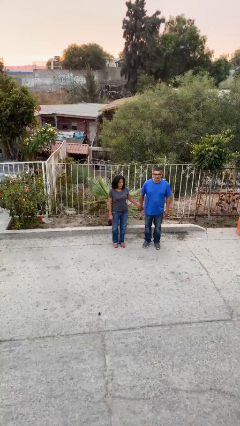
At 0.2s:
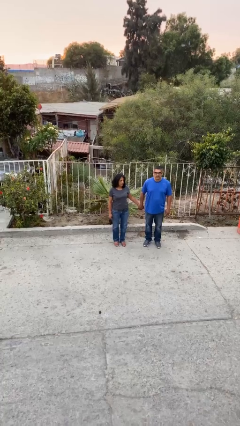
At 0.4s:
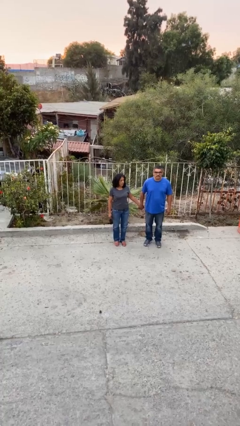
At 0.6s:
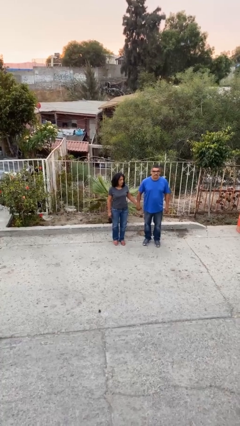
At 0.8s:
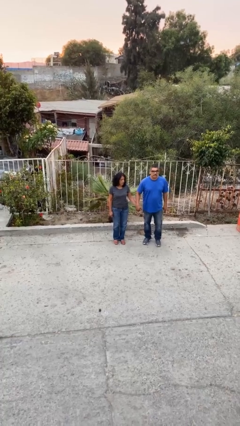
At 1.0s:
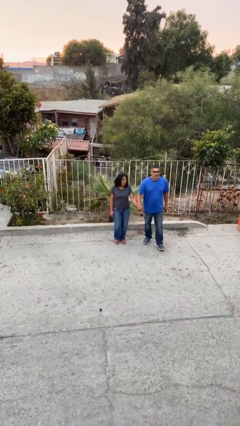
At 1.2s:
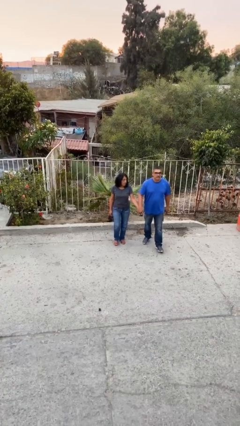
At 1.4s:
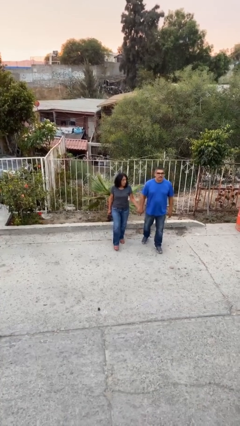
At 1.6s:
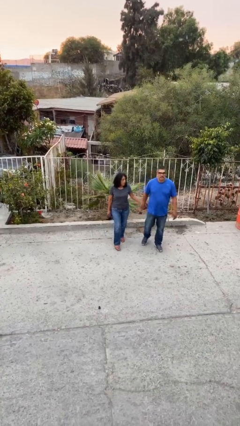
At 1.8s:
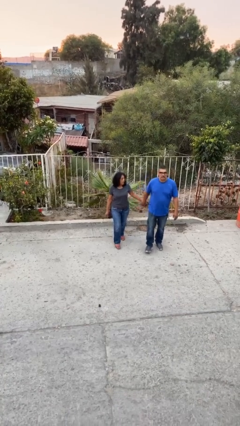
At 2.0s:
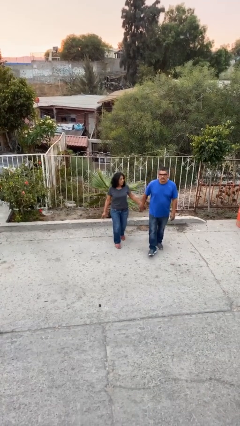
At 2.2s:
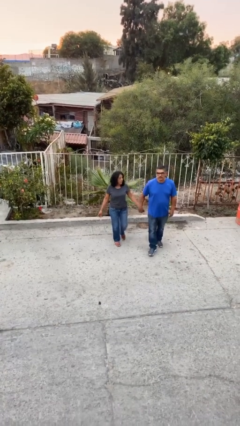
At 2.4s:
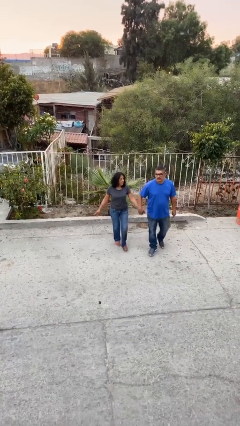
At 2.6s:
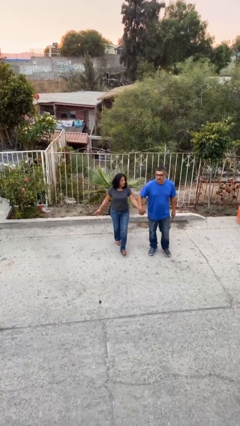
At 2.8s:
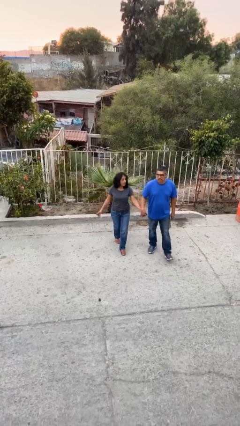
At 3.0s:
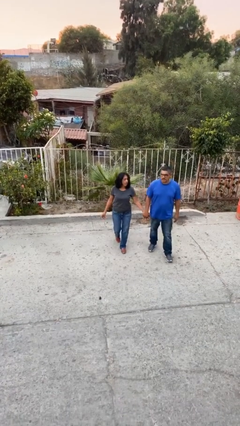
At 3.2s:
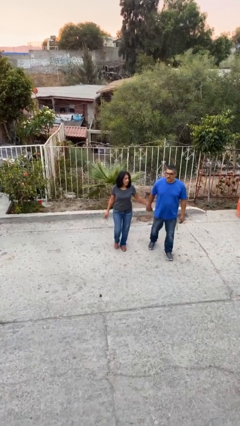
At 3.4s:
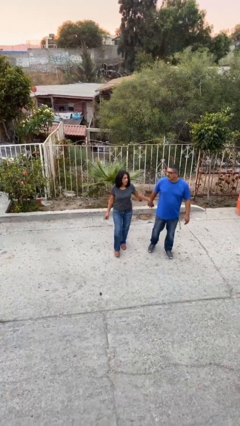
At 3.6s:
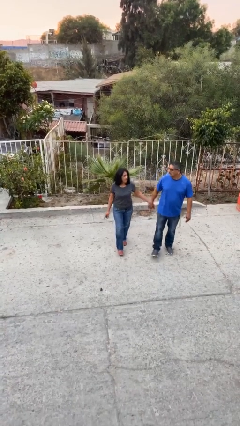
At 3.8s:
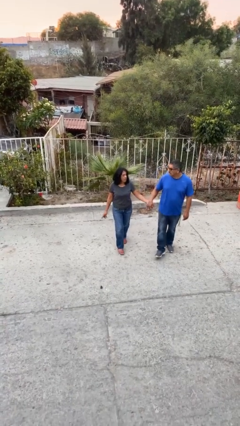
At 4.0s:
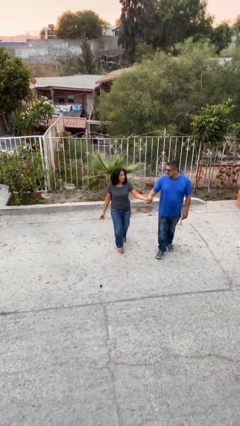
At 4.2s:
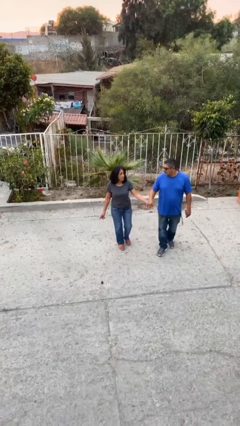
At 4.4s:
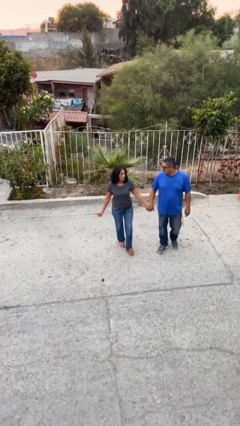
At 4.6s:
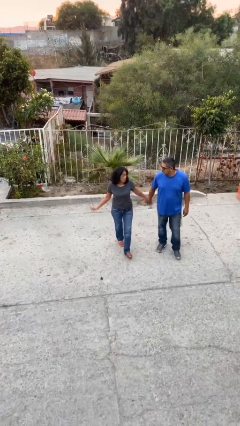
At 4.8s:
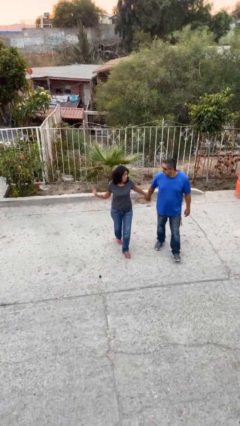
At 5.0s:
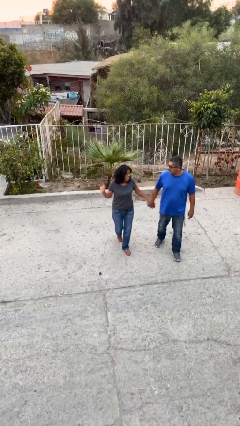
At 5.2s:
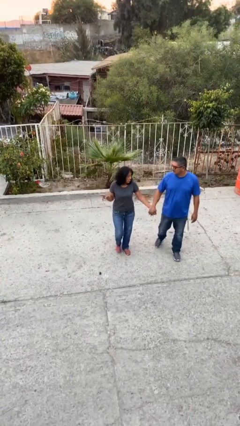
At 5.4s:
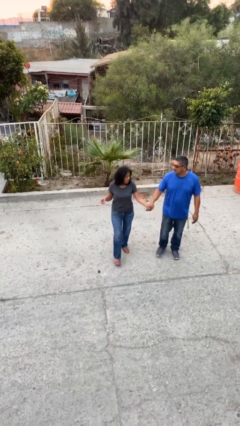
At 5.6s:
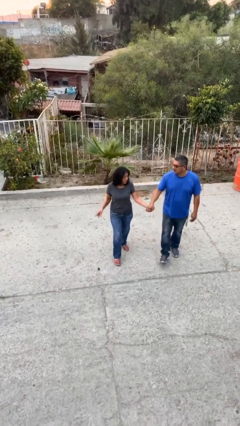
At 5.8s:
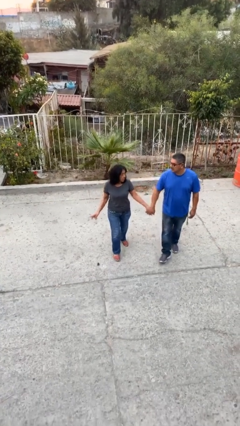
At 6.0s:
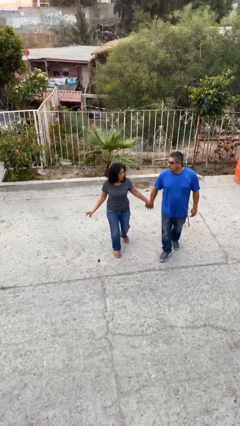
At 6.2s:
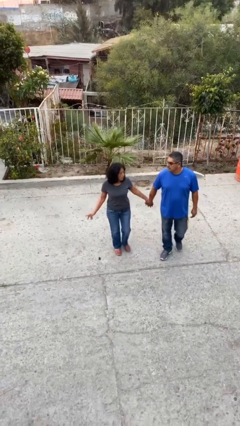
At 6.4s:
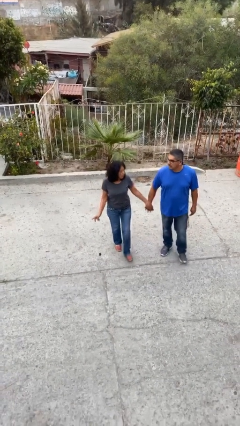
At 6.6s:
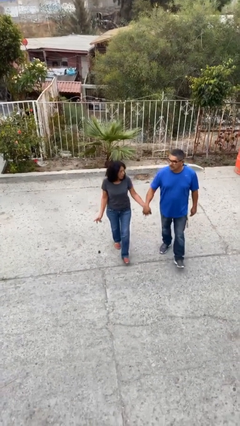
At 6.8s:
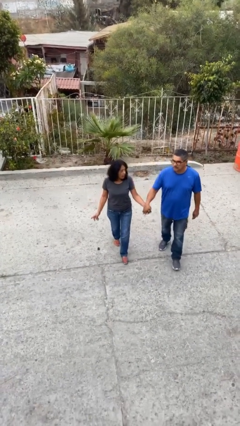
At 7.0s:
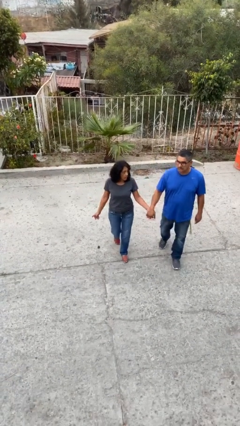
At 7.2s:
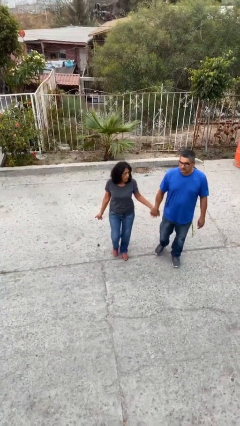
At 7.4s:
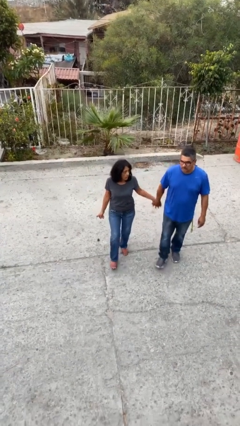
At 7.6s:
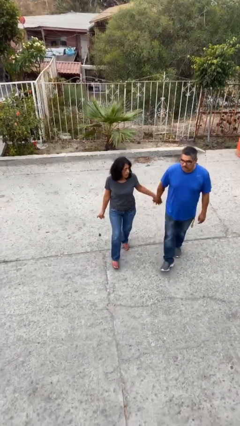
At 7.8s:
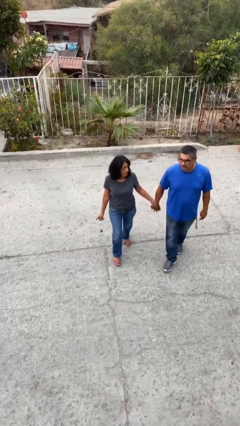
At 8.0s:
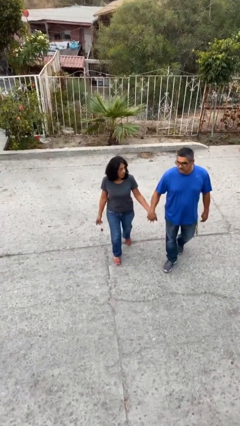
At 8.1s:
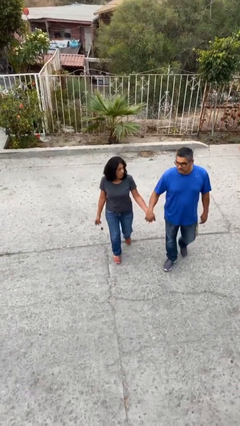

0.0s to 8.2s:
person holds hand

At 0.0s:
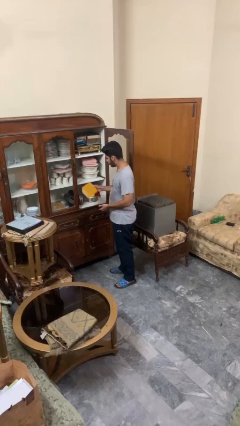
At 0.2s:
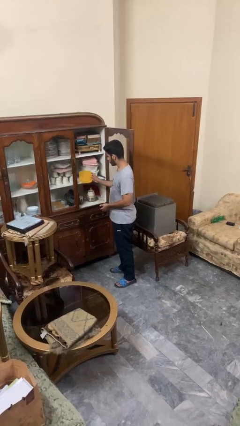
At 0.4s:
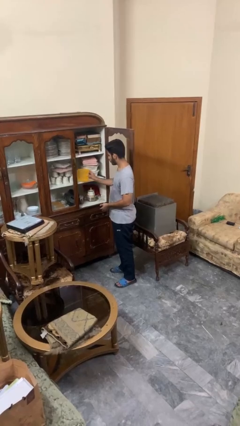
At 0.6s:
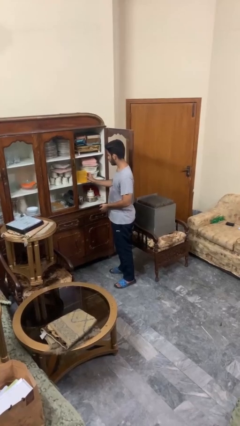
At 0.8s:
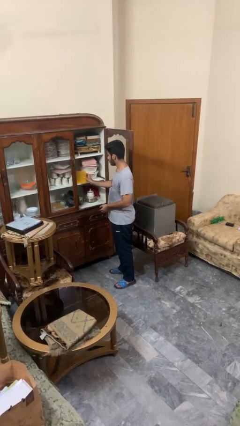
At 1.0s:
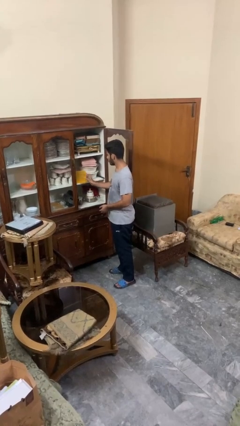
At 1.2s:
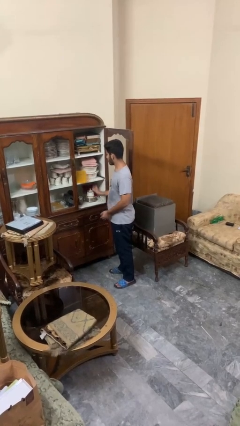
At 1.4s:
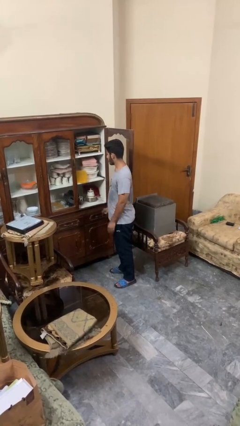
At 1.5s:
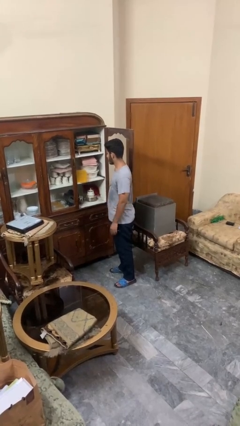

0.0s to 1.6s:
person puts down object into cabinet

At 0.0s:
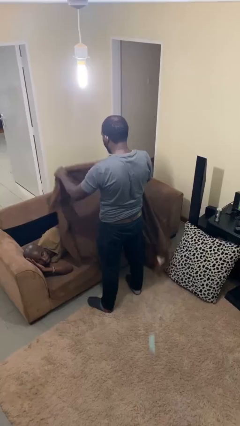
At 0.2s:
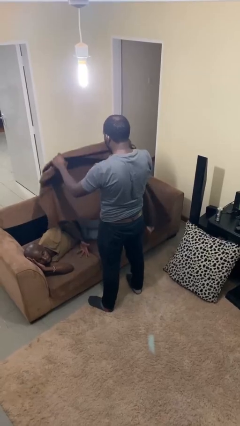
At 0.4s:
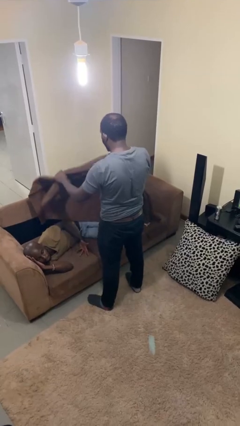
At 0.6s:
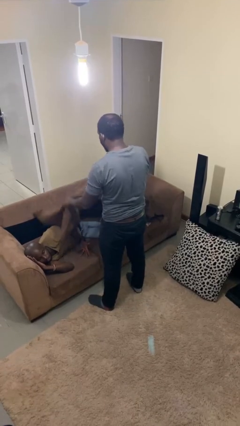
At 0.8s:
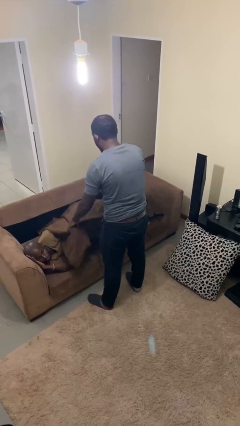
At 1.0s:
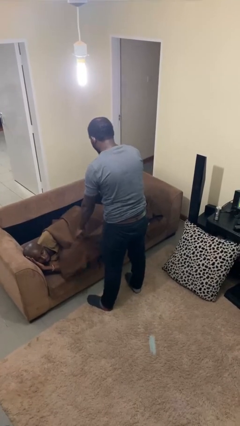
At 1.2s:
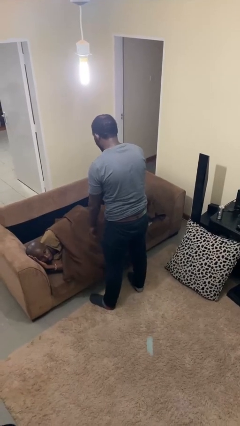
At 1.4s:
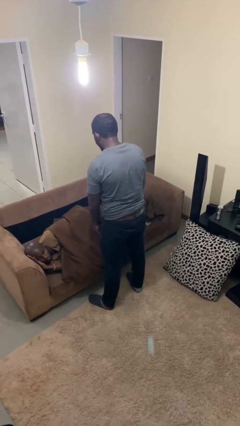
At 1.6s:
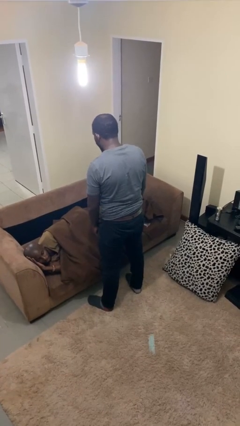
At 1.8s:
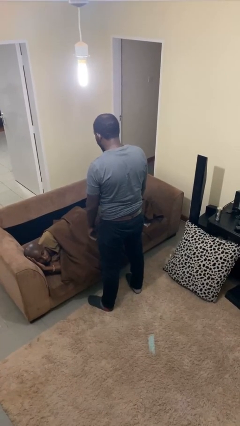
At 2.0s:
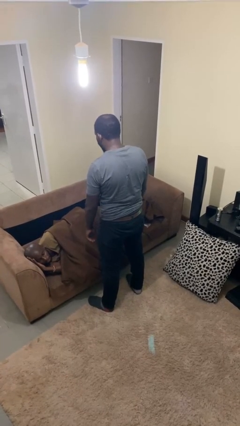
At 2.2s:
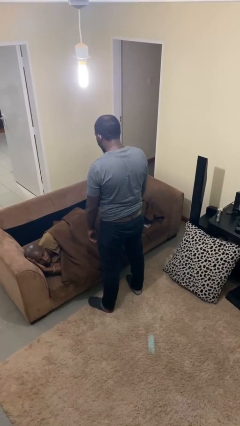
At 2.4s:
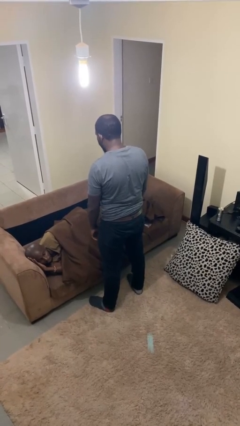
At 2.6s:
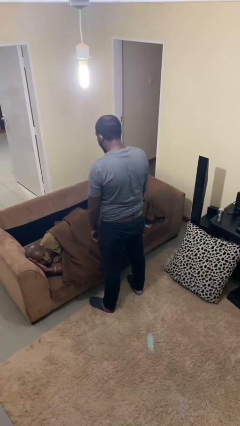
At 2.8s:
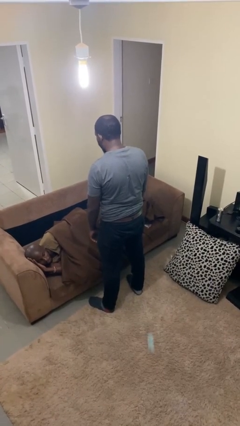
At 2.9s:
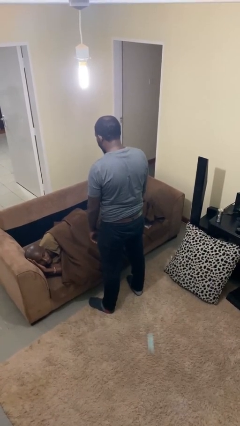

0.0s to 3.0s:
person covers friend with blanket

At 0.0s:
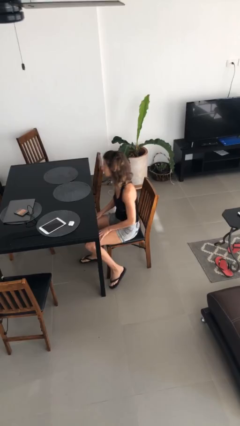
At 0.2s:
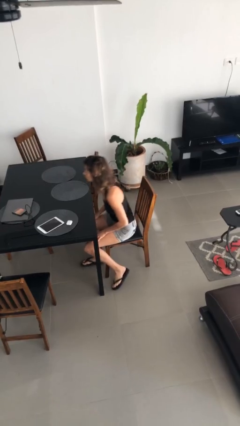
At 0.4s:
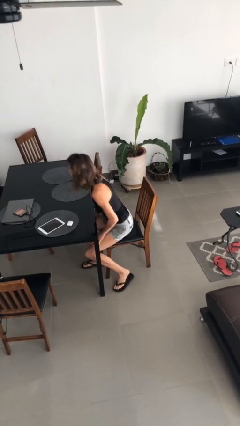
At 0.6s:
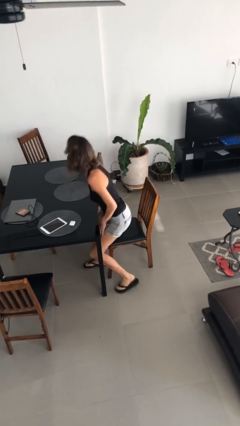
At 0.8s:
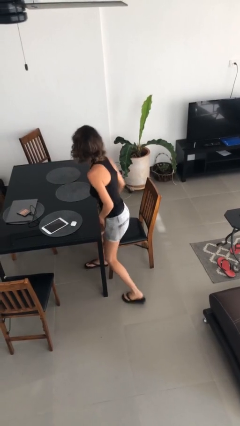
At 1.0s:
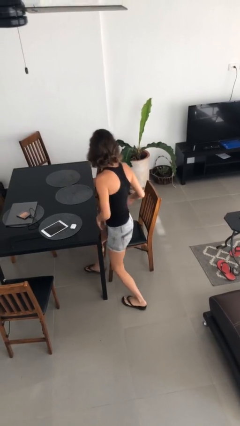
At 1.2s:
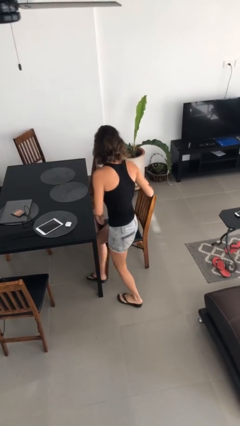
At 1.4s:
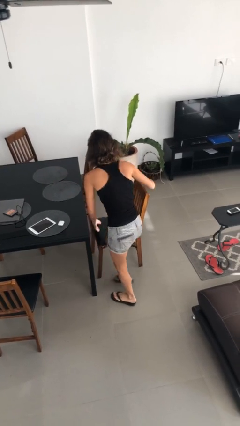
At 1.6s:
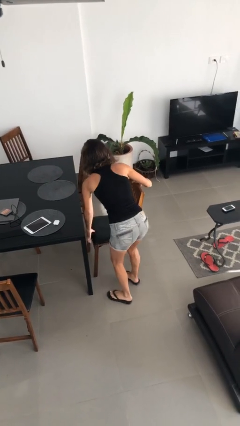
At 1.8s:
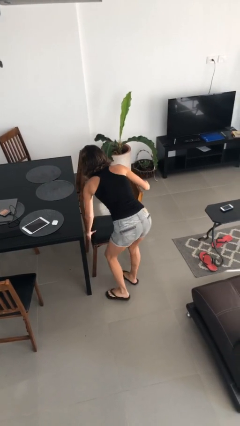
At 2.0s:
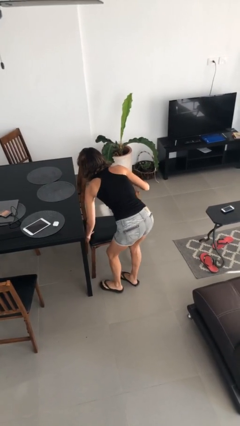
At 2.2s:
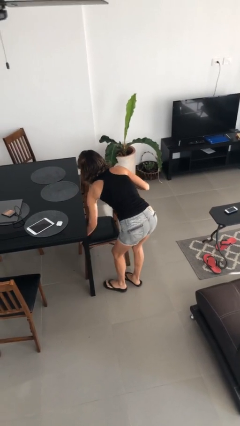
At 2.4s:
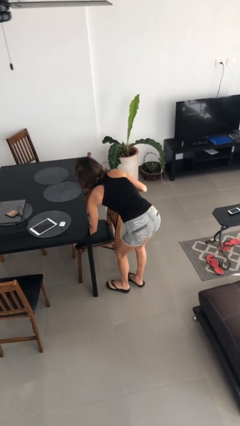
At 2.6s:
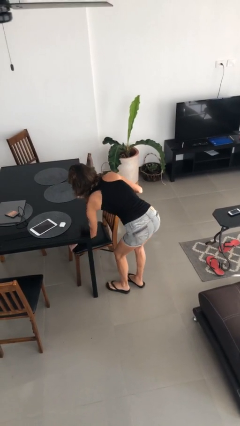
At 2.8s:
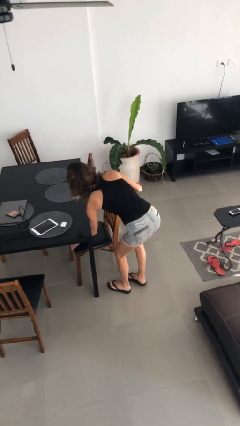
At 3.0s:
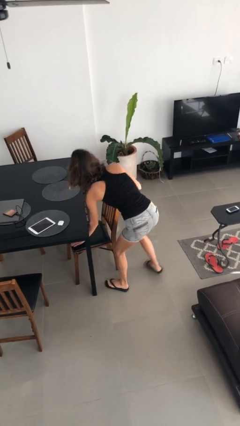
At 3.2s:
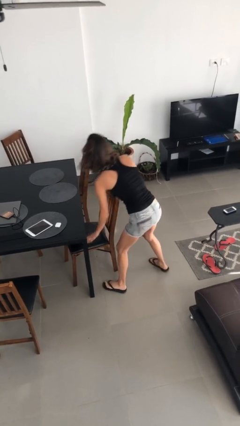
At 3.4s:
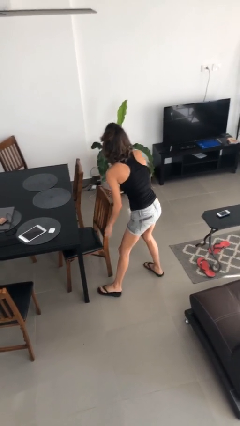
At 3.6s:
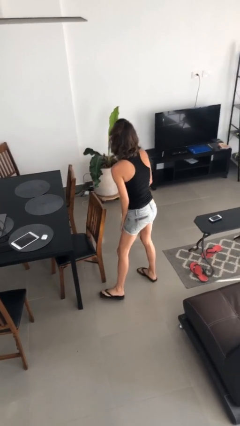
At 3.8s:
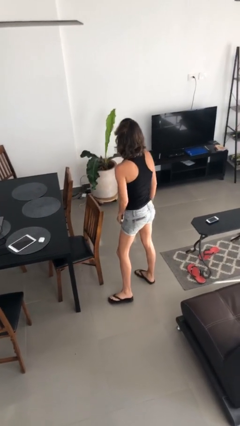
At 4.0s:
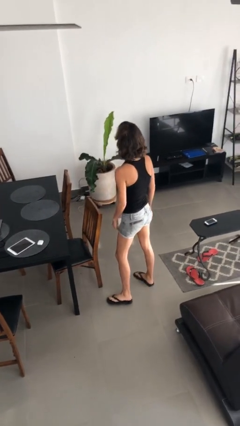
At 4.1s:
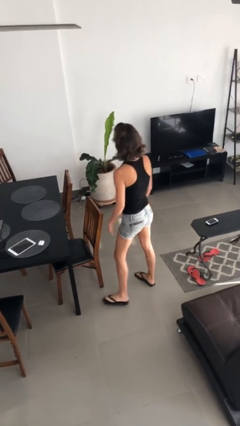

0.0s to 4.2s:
person stands up

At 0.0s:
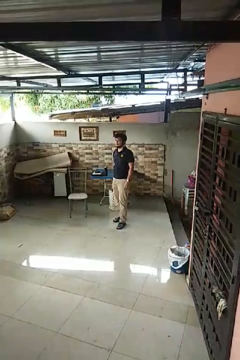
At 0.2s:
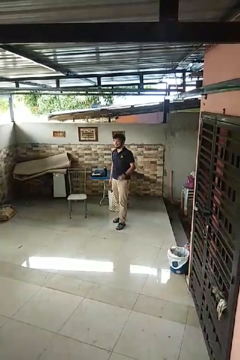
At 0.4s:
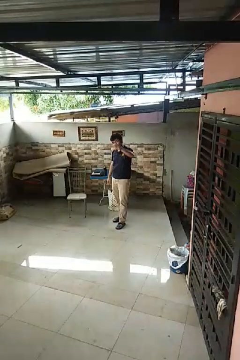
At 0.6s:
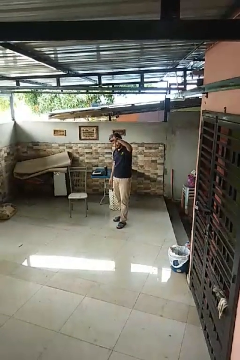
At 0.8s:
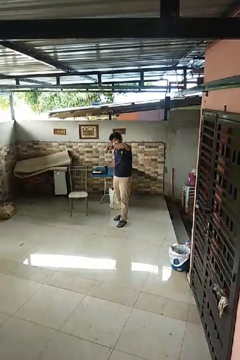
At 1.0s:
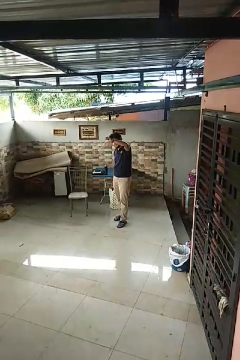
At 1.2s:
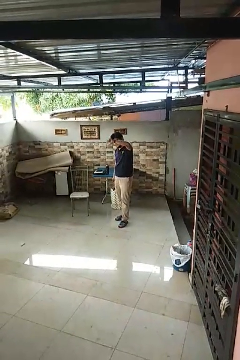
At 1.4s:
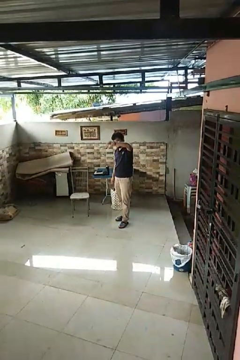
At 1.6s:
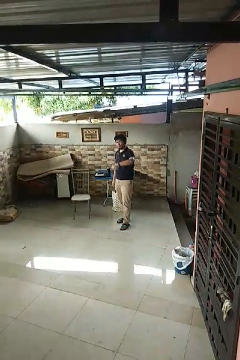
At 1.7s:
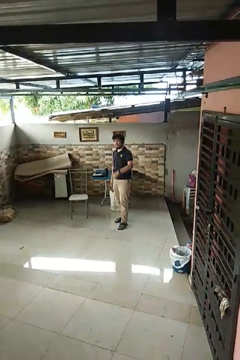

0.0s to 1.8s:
person gestures thumbs down
